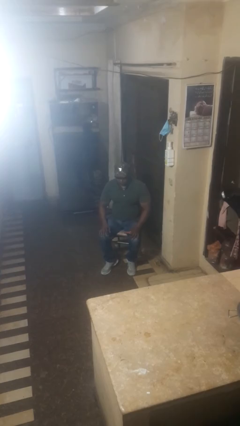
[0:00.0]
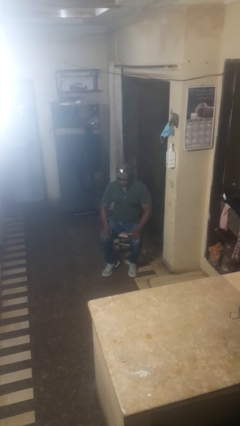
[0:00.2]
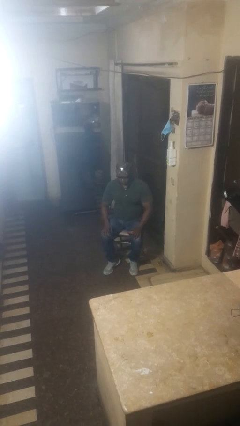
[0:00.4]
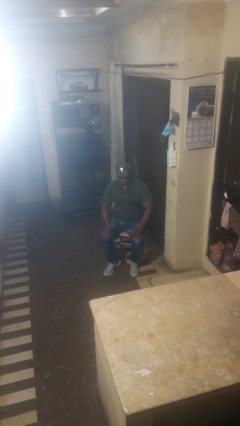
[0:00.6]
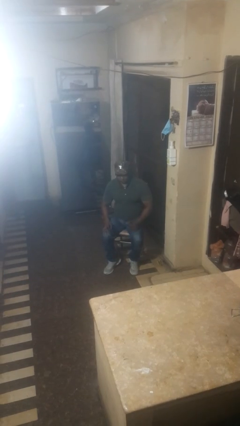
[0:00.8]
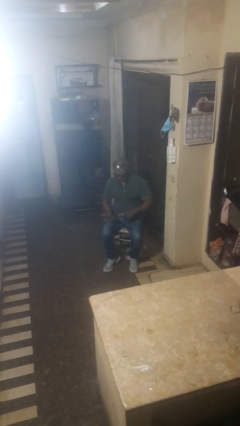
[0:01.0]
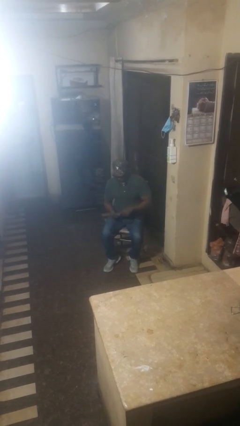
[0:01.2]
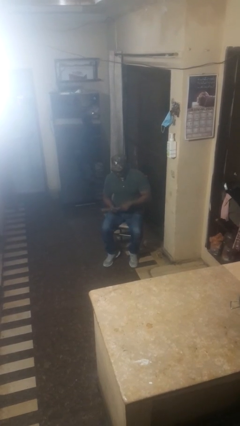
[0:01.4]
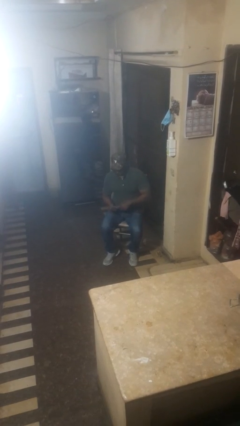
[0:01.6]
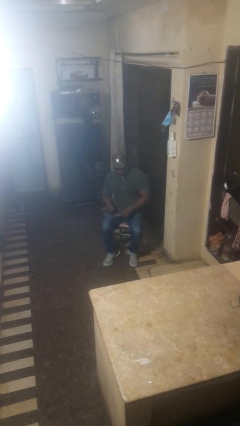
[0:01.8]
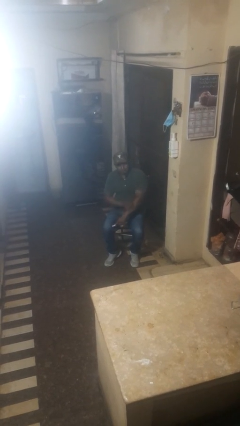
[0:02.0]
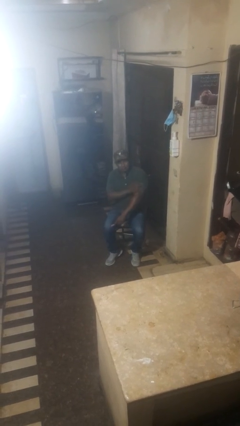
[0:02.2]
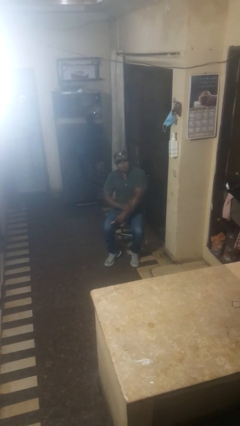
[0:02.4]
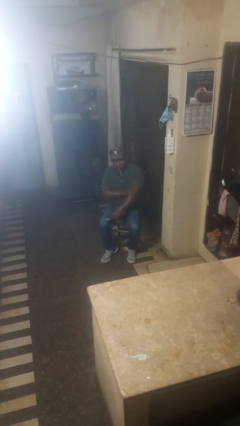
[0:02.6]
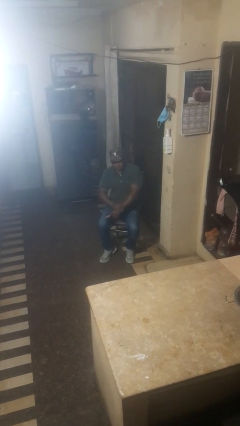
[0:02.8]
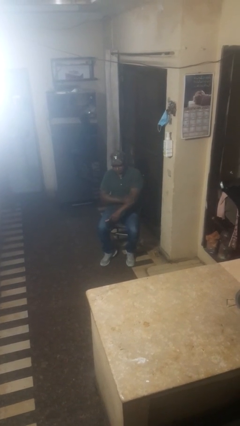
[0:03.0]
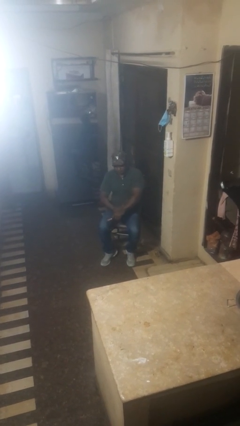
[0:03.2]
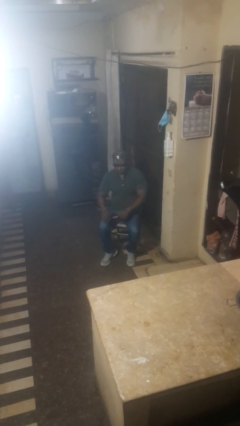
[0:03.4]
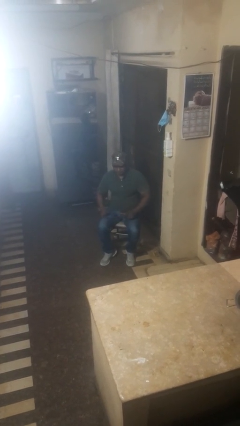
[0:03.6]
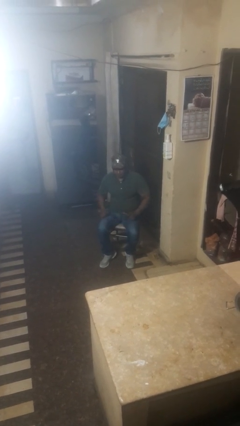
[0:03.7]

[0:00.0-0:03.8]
person applies sunscreen

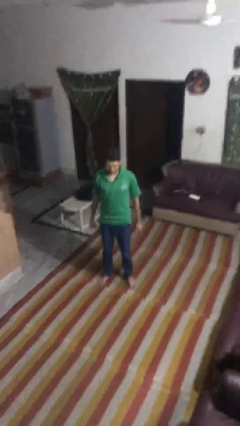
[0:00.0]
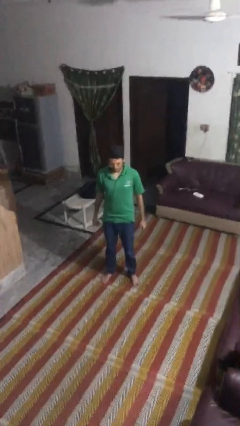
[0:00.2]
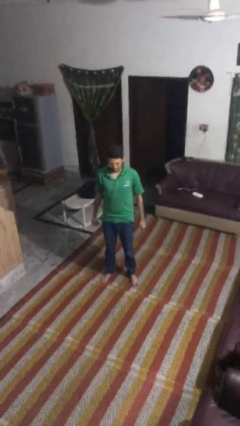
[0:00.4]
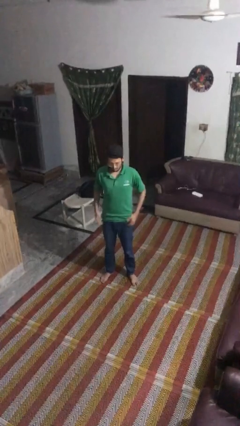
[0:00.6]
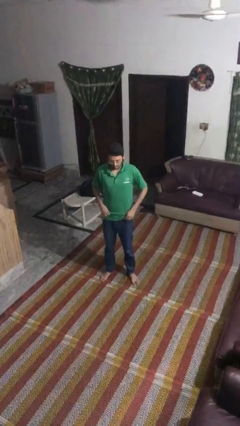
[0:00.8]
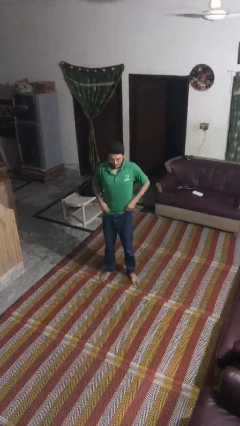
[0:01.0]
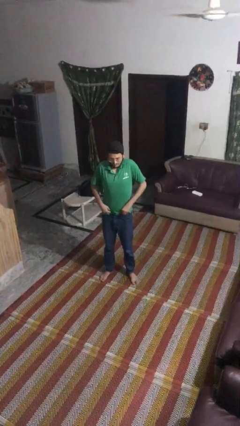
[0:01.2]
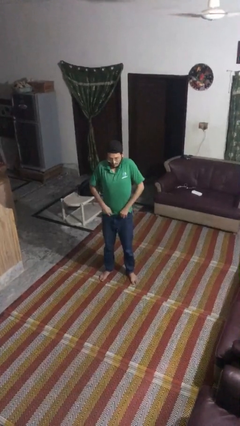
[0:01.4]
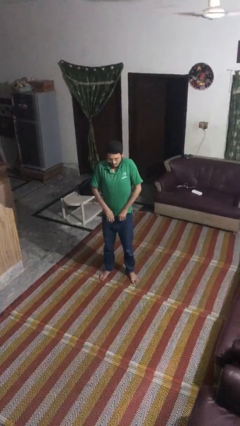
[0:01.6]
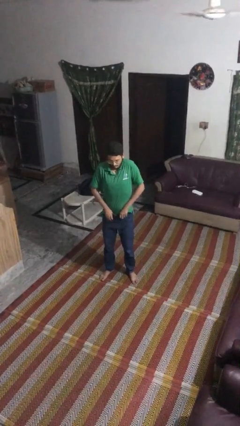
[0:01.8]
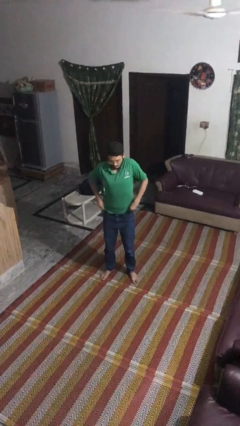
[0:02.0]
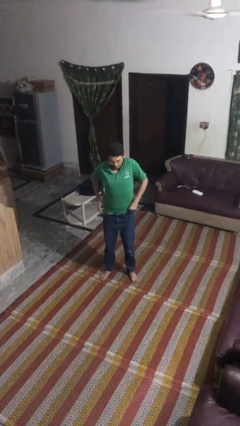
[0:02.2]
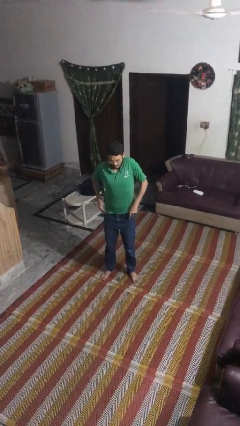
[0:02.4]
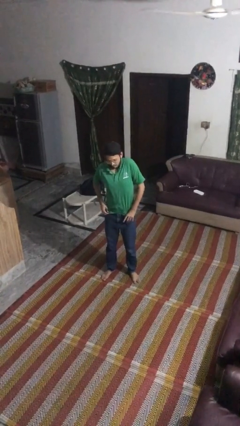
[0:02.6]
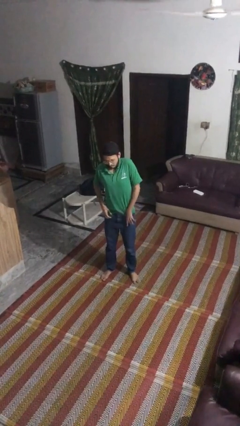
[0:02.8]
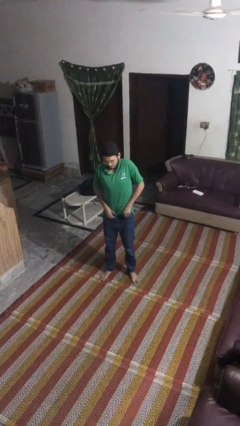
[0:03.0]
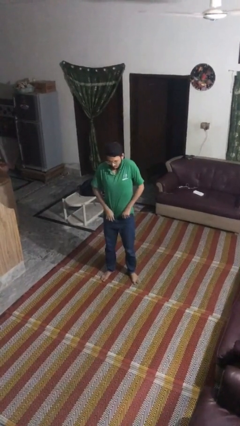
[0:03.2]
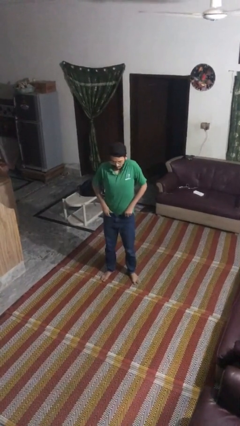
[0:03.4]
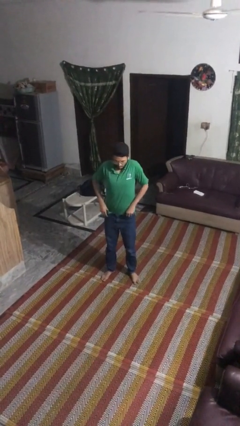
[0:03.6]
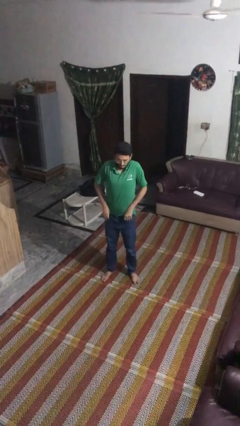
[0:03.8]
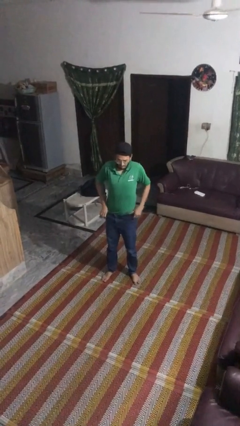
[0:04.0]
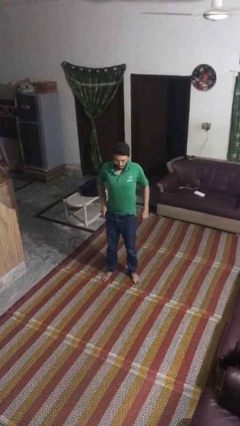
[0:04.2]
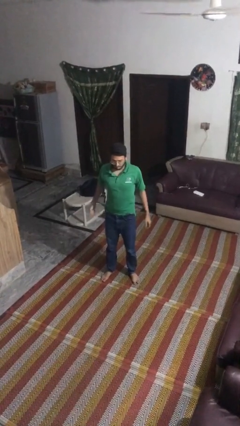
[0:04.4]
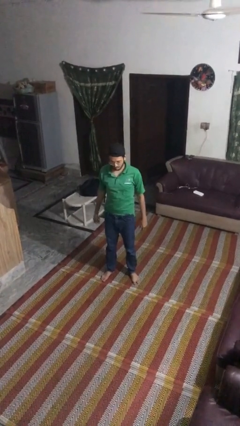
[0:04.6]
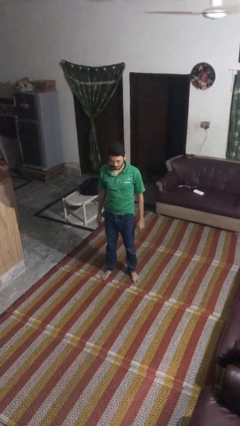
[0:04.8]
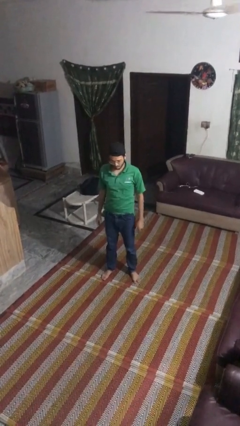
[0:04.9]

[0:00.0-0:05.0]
person tucks in shirt

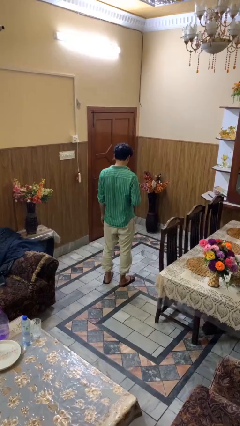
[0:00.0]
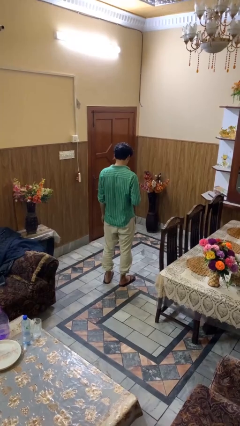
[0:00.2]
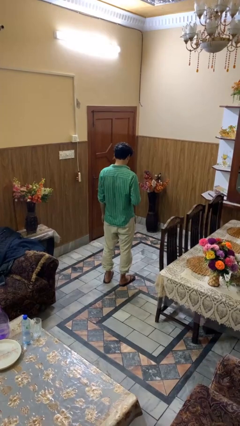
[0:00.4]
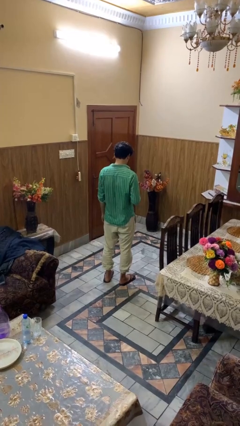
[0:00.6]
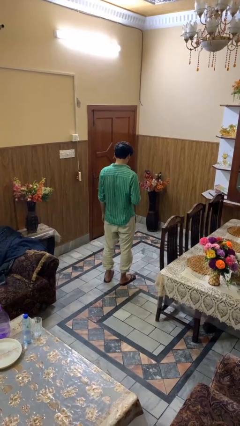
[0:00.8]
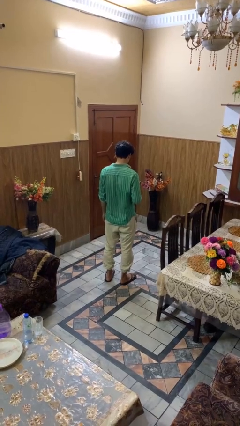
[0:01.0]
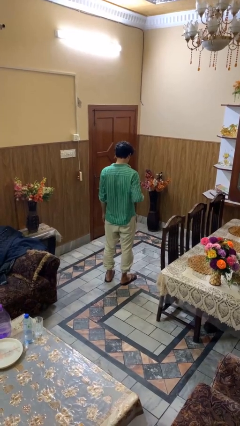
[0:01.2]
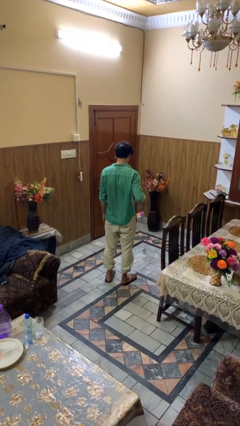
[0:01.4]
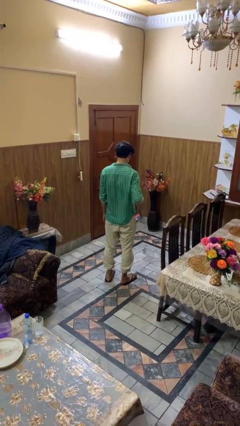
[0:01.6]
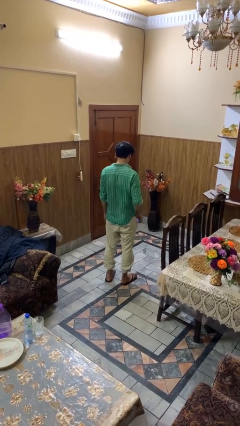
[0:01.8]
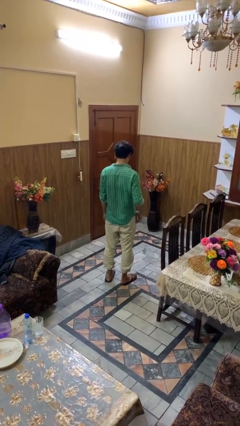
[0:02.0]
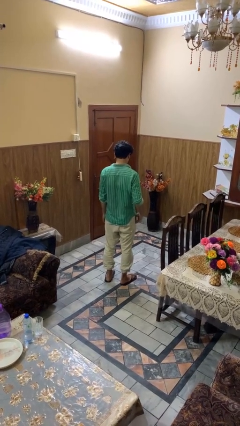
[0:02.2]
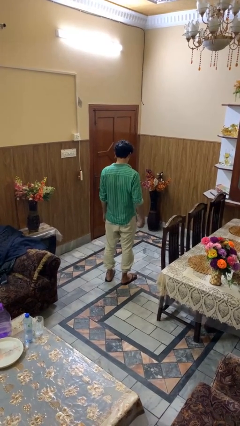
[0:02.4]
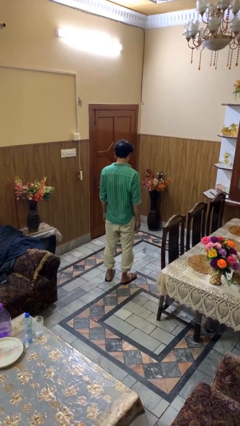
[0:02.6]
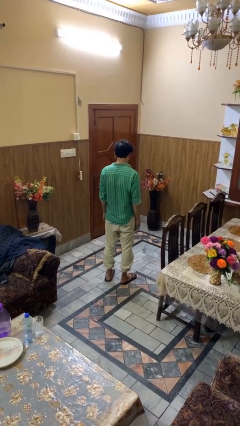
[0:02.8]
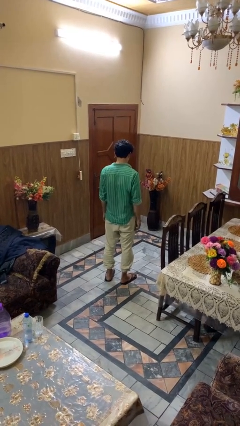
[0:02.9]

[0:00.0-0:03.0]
person puts phone into pocket

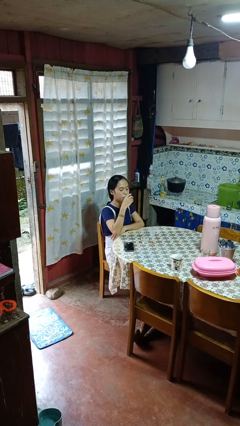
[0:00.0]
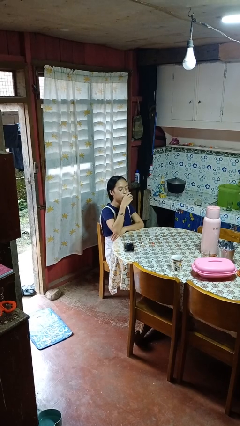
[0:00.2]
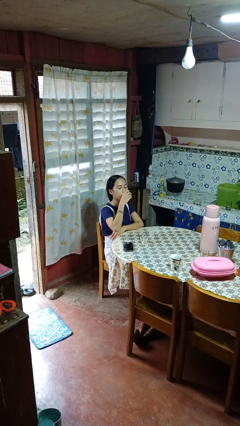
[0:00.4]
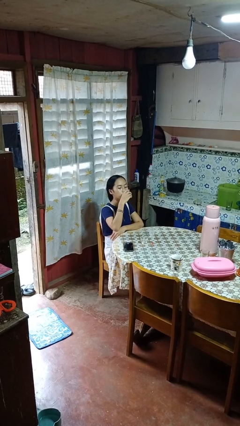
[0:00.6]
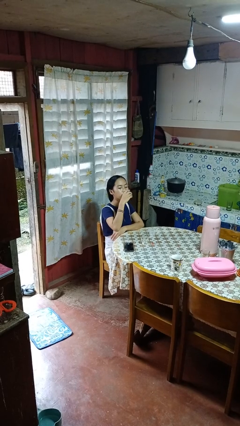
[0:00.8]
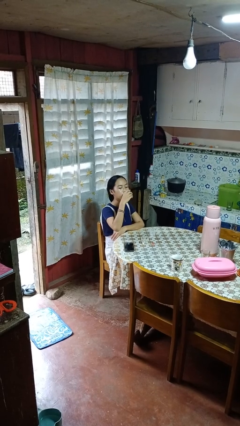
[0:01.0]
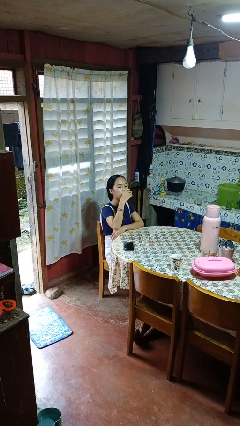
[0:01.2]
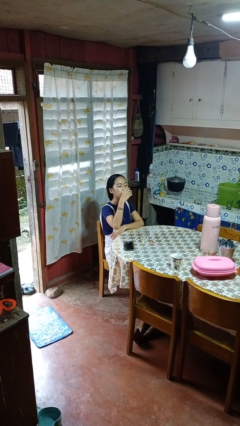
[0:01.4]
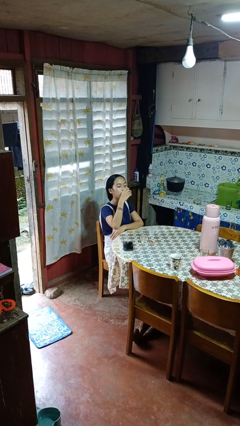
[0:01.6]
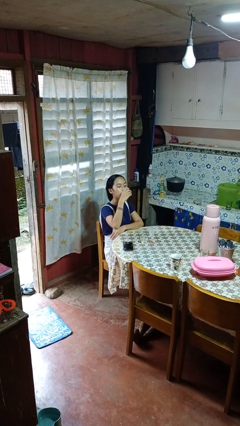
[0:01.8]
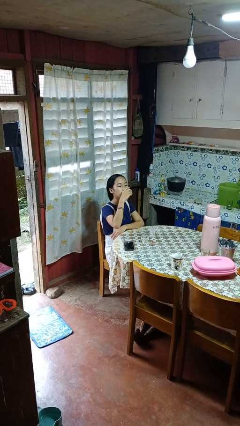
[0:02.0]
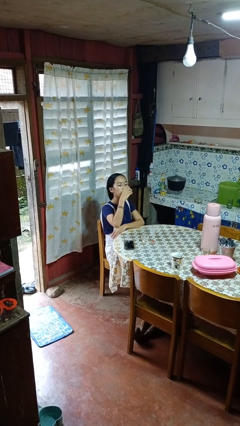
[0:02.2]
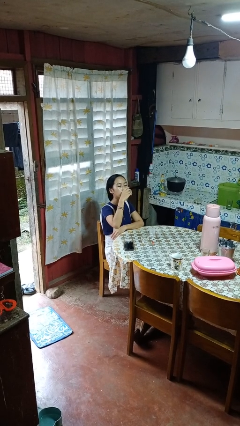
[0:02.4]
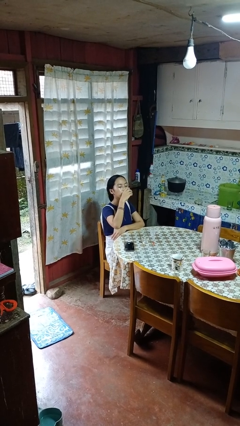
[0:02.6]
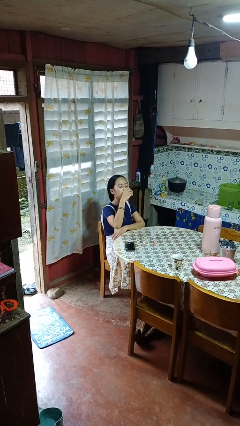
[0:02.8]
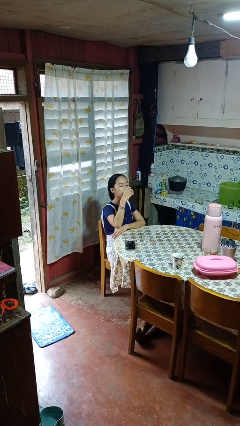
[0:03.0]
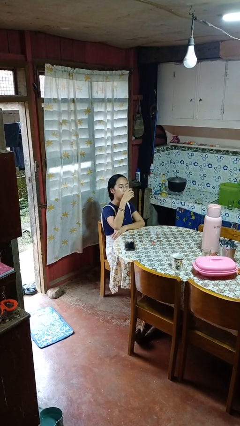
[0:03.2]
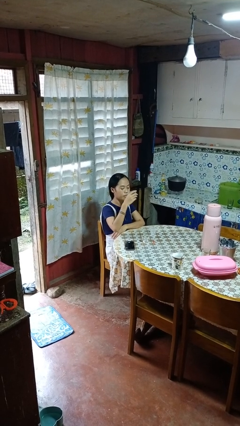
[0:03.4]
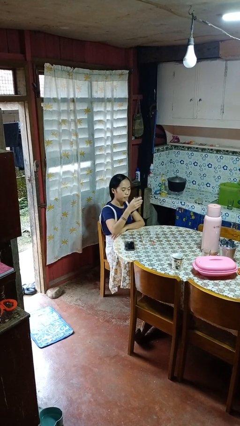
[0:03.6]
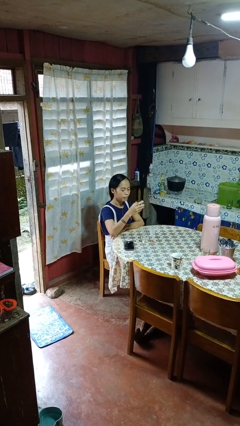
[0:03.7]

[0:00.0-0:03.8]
person drinks from shotglass

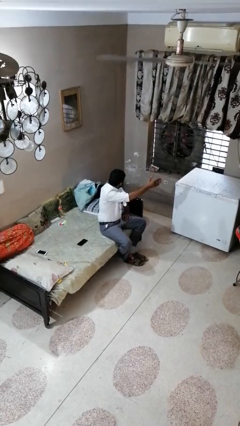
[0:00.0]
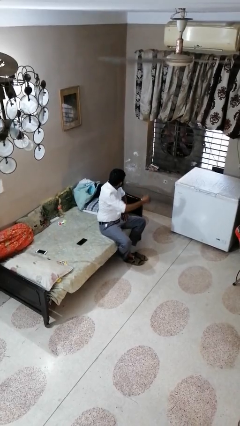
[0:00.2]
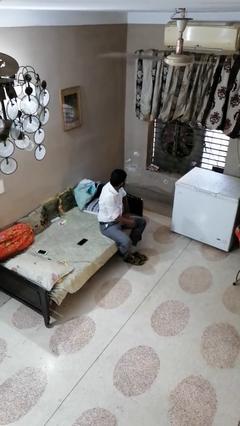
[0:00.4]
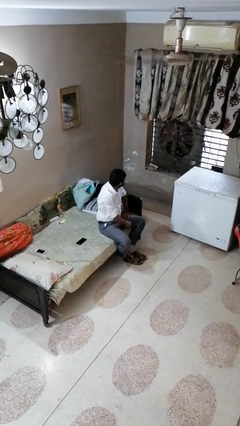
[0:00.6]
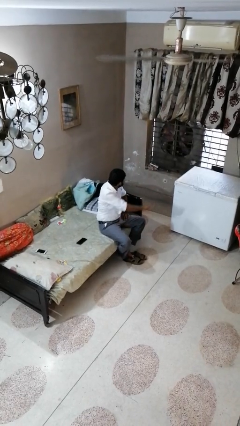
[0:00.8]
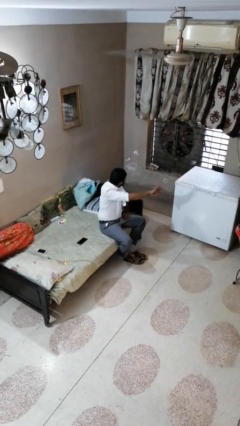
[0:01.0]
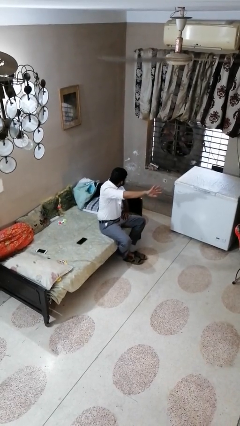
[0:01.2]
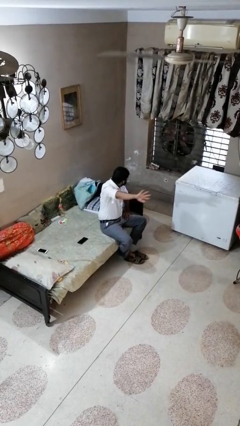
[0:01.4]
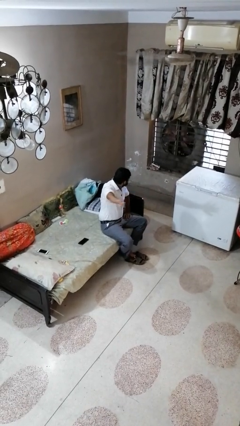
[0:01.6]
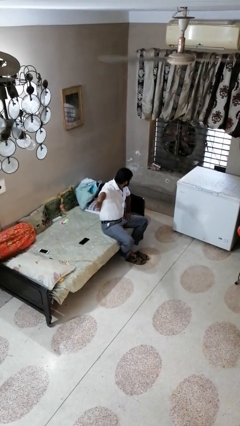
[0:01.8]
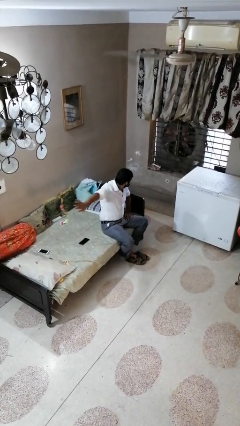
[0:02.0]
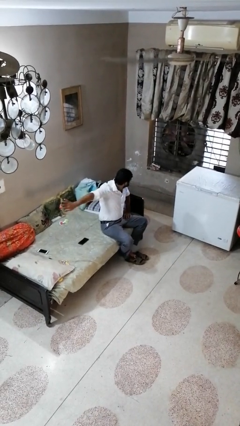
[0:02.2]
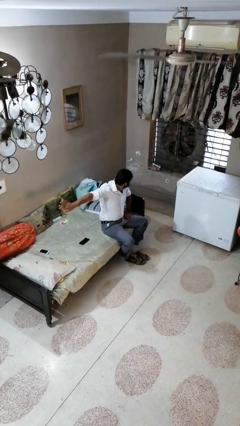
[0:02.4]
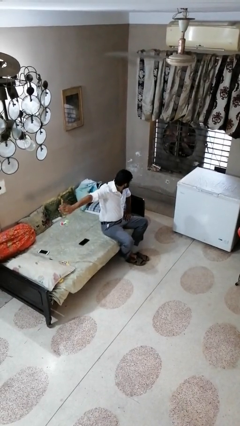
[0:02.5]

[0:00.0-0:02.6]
person gestures swipe right
